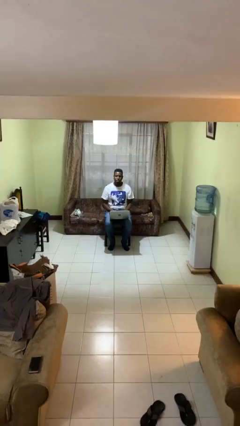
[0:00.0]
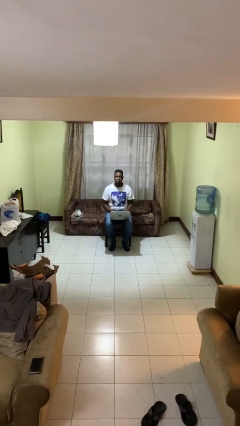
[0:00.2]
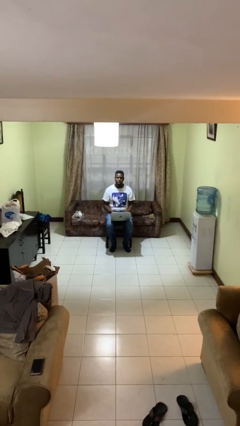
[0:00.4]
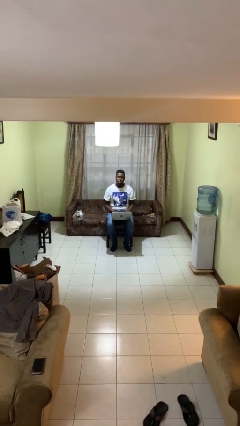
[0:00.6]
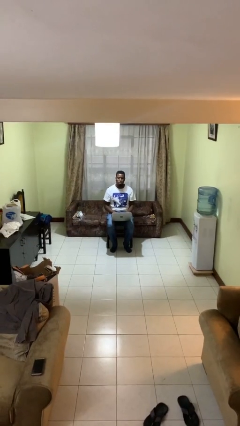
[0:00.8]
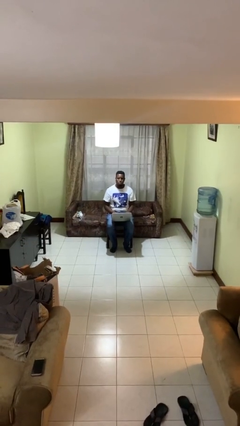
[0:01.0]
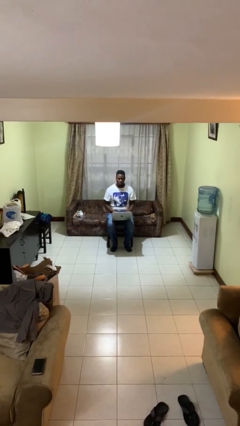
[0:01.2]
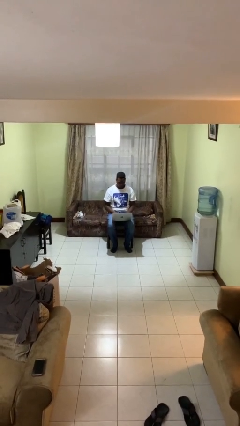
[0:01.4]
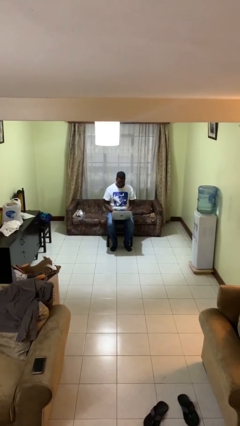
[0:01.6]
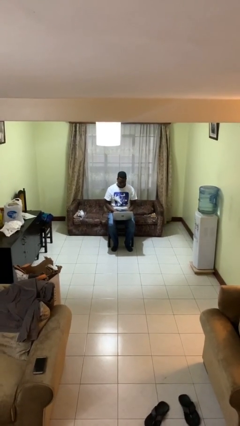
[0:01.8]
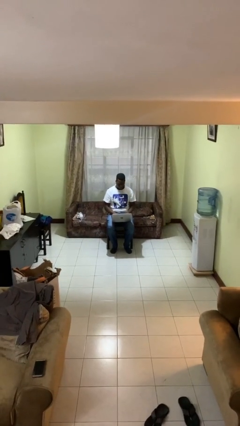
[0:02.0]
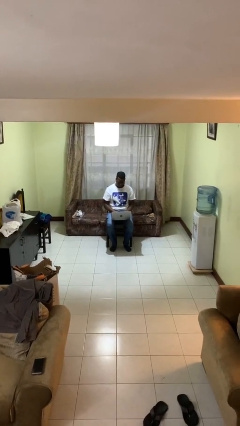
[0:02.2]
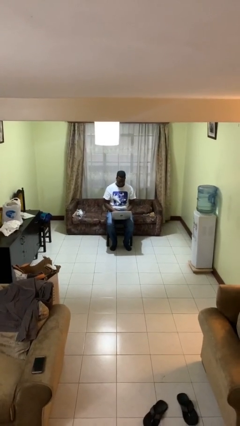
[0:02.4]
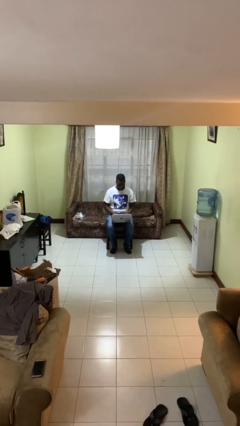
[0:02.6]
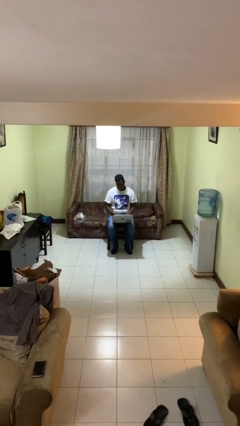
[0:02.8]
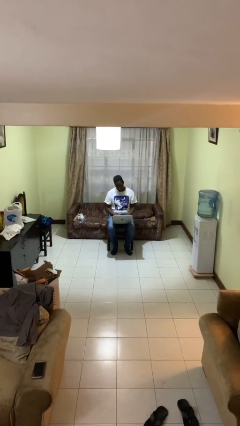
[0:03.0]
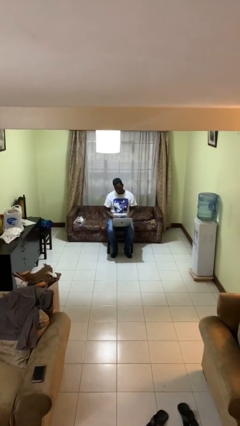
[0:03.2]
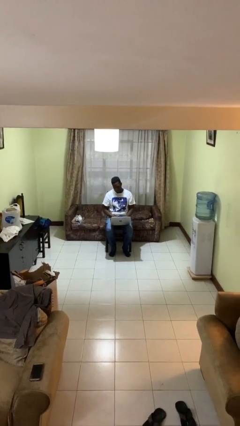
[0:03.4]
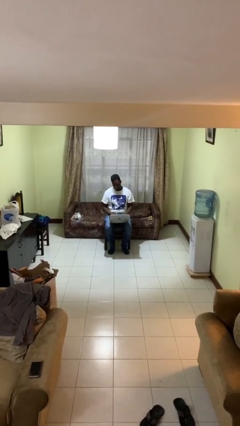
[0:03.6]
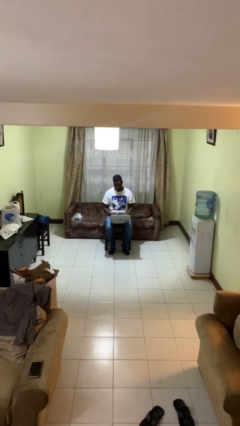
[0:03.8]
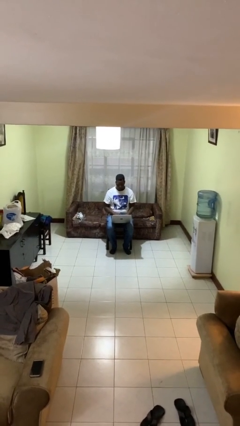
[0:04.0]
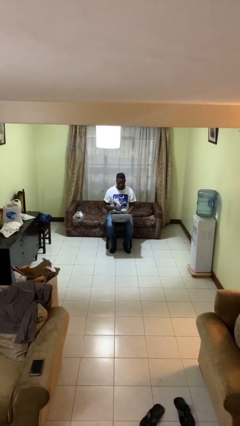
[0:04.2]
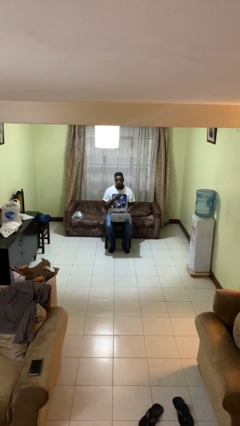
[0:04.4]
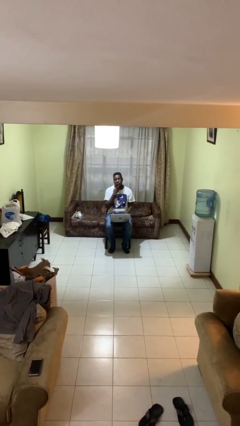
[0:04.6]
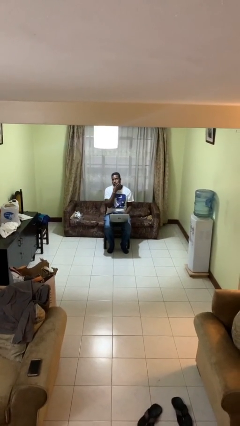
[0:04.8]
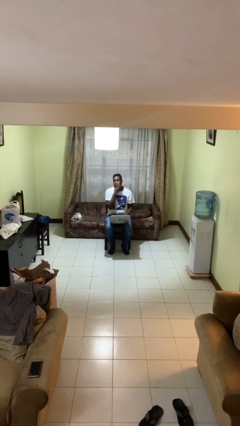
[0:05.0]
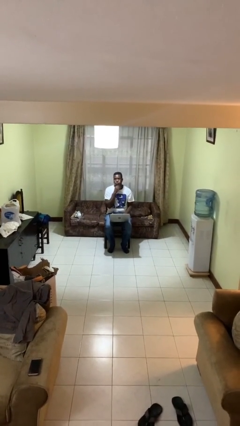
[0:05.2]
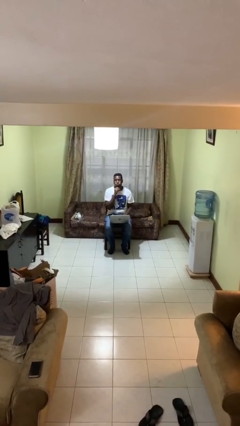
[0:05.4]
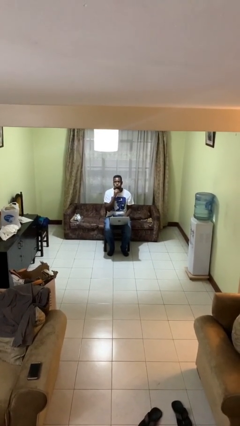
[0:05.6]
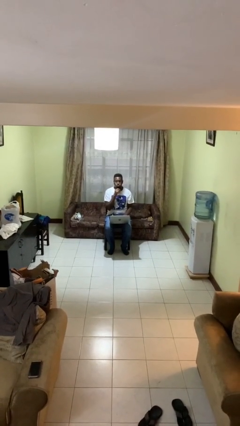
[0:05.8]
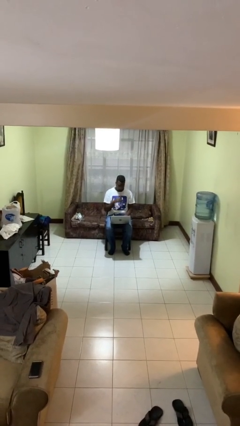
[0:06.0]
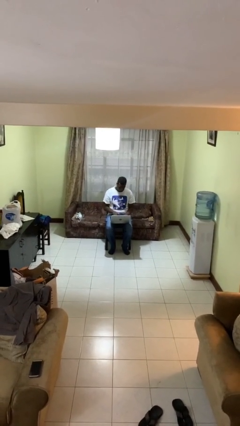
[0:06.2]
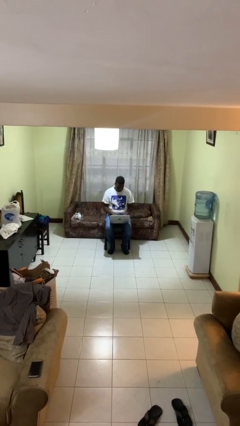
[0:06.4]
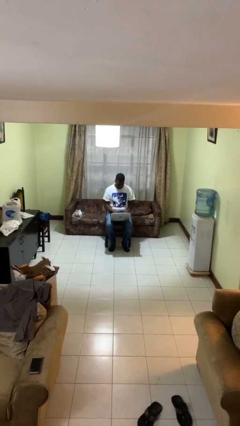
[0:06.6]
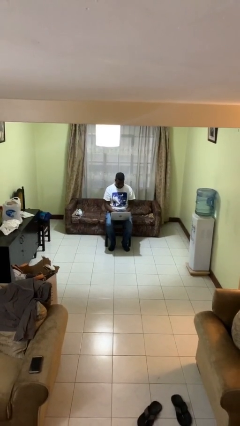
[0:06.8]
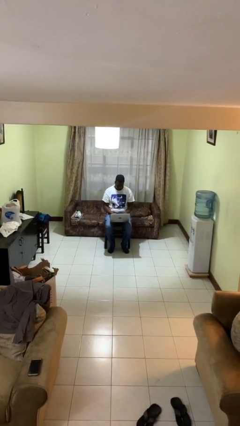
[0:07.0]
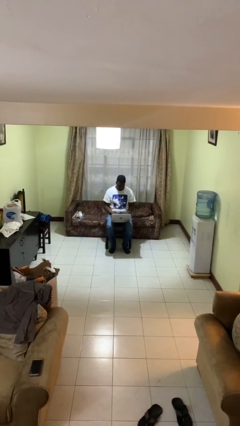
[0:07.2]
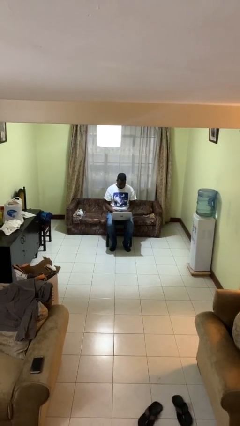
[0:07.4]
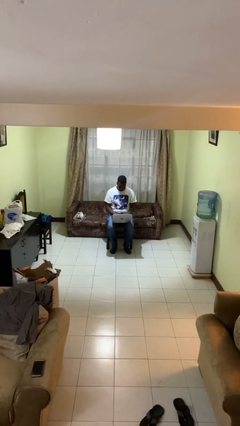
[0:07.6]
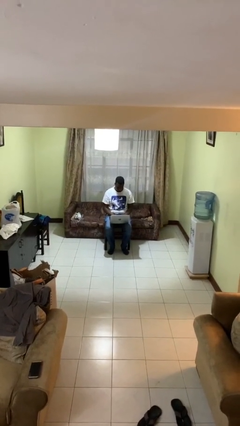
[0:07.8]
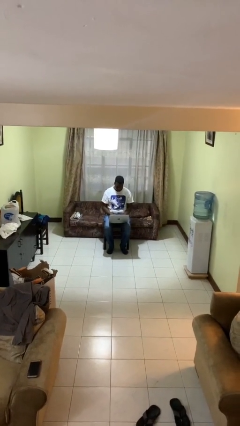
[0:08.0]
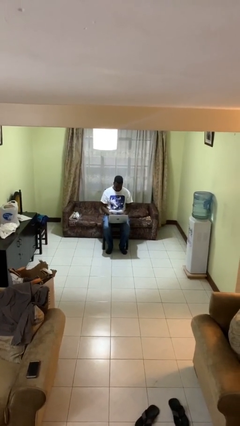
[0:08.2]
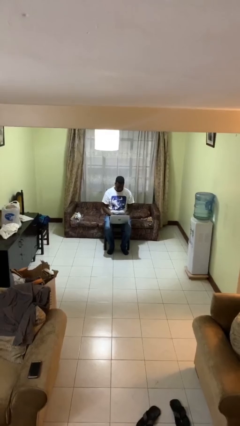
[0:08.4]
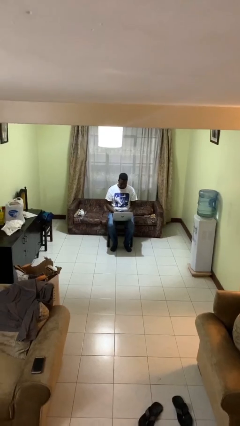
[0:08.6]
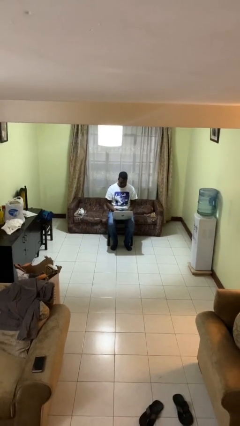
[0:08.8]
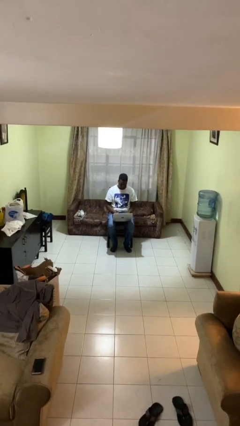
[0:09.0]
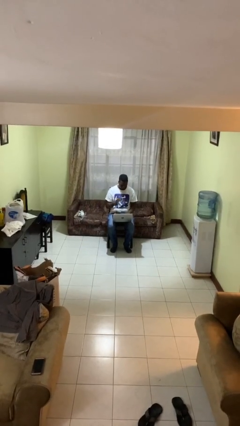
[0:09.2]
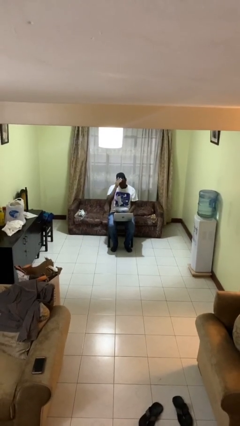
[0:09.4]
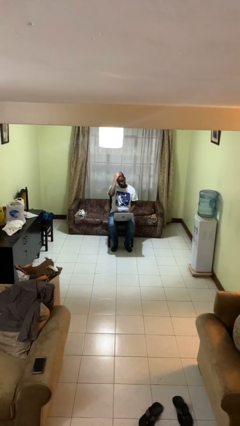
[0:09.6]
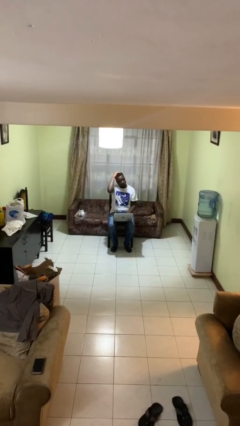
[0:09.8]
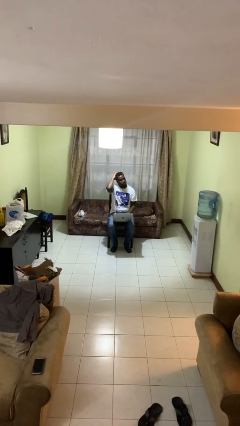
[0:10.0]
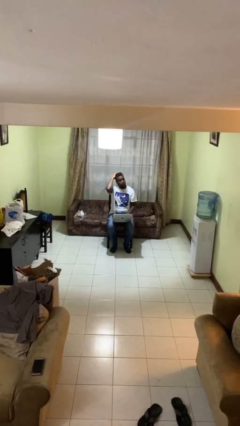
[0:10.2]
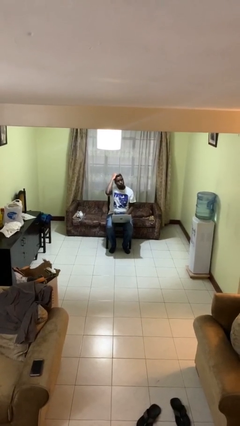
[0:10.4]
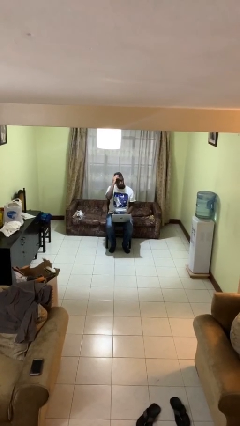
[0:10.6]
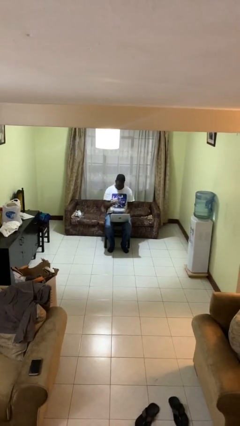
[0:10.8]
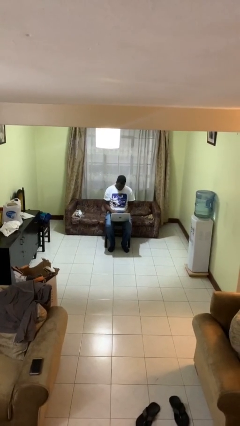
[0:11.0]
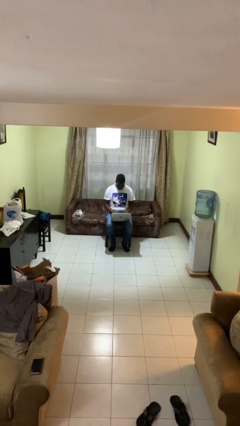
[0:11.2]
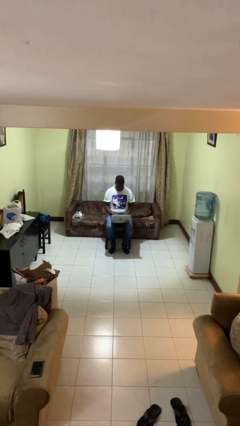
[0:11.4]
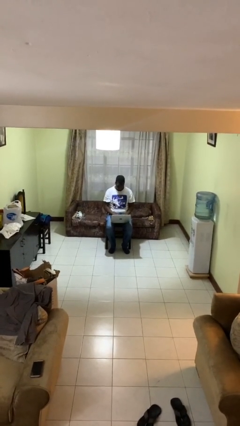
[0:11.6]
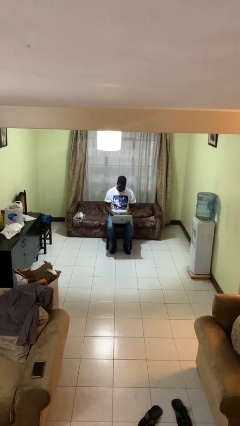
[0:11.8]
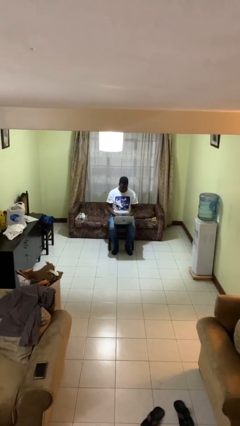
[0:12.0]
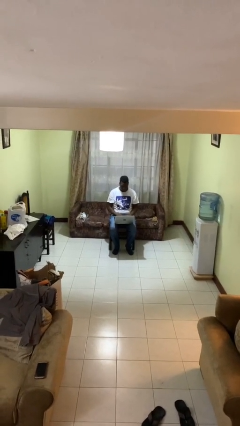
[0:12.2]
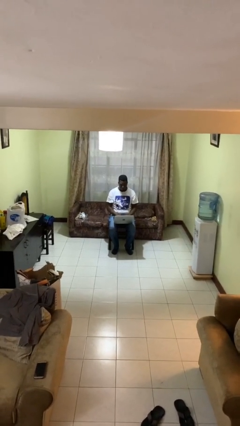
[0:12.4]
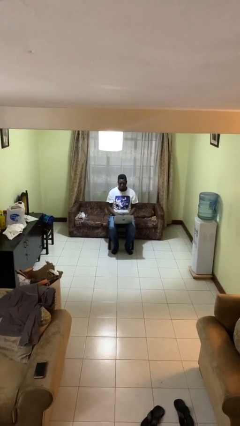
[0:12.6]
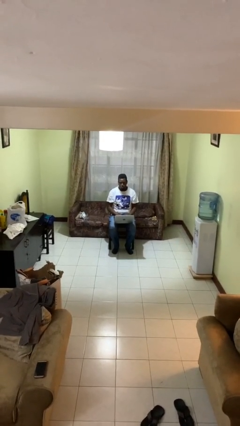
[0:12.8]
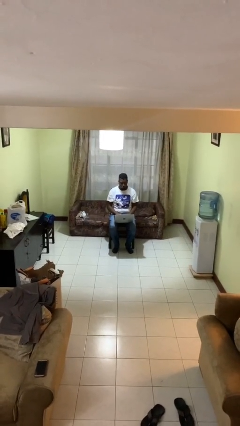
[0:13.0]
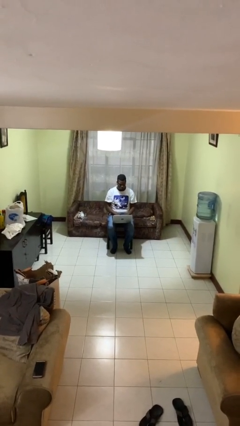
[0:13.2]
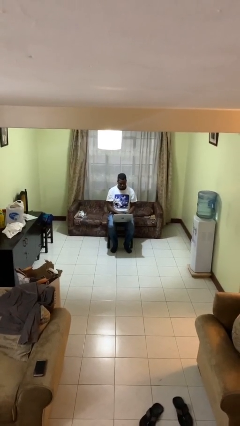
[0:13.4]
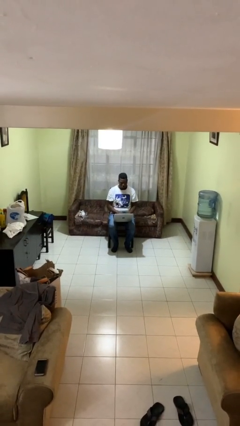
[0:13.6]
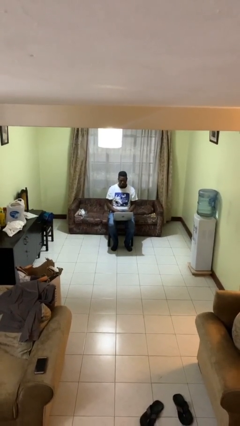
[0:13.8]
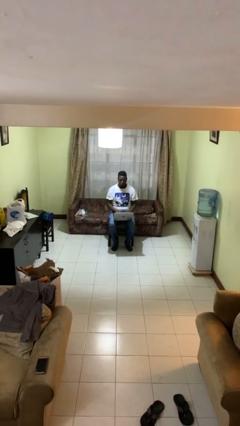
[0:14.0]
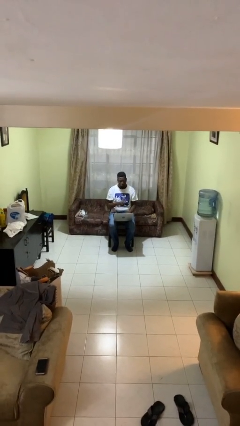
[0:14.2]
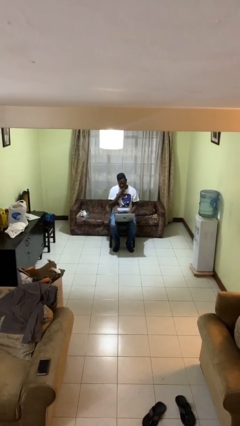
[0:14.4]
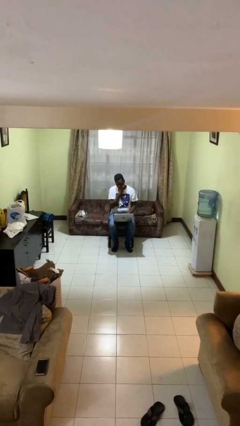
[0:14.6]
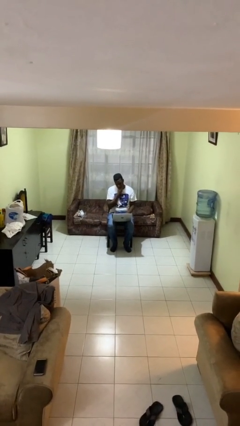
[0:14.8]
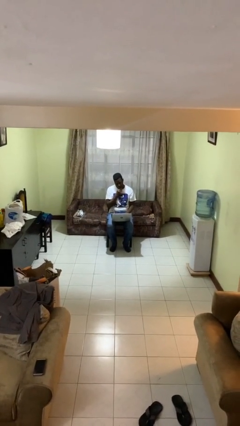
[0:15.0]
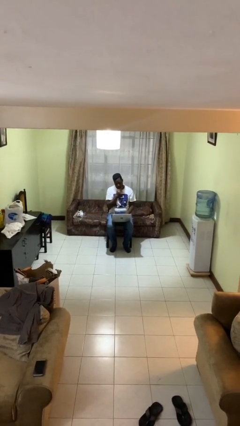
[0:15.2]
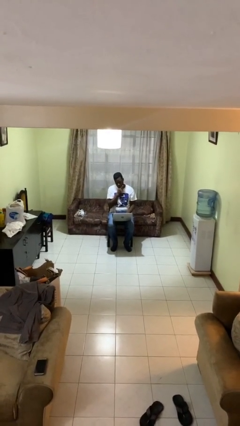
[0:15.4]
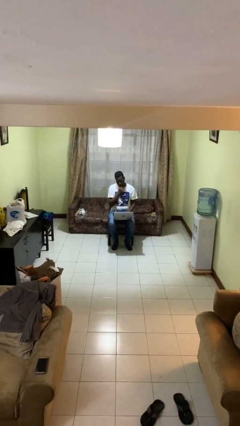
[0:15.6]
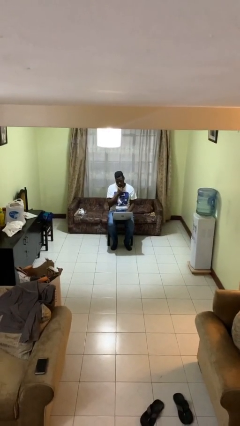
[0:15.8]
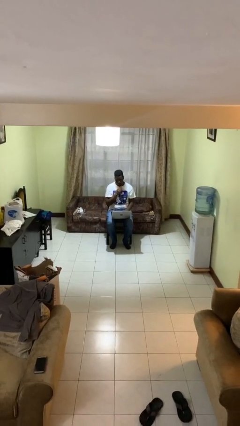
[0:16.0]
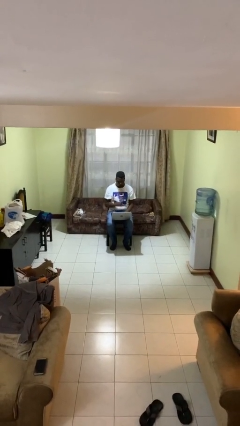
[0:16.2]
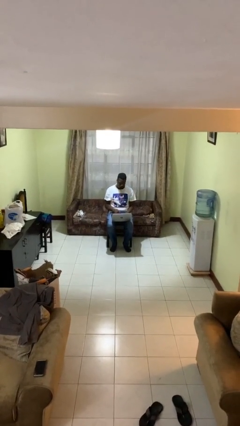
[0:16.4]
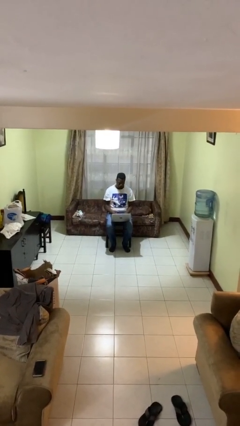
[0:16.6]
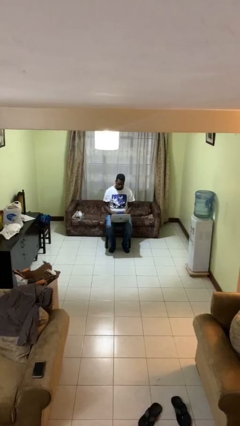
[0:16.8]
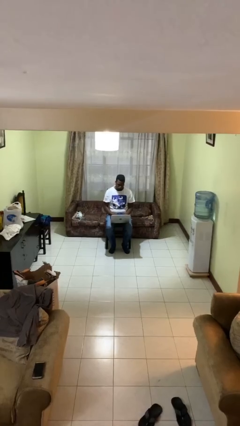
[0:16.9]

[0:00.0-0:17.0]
person interacts with laptop

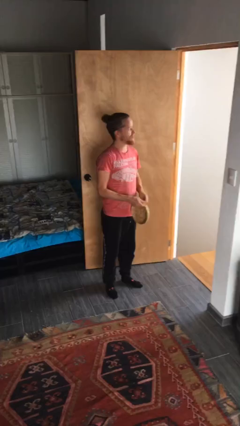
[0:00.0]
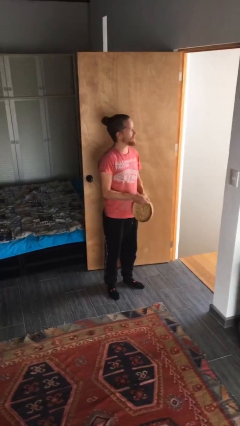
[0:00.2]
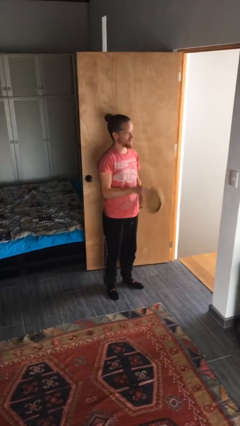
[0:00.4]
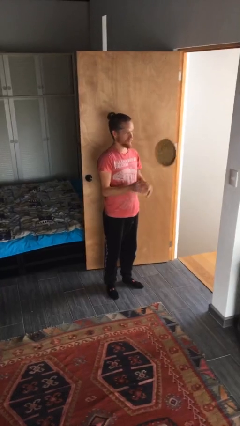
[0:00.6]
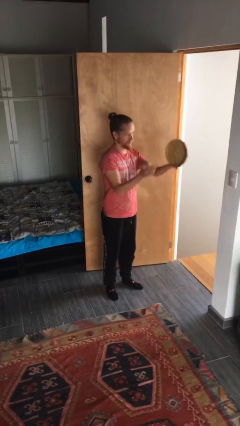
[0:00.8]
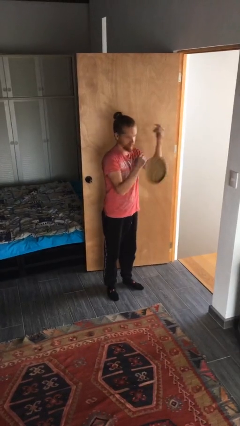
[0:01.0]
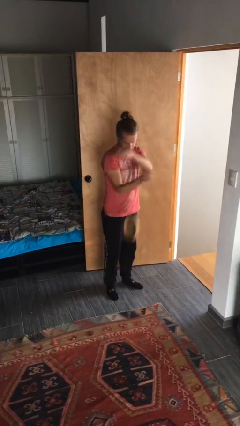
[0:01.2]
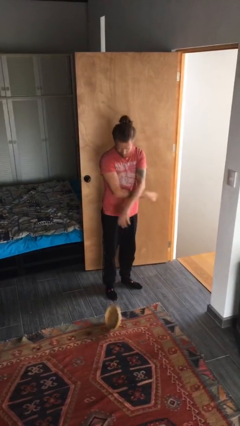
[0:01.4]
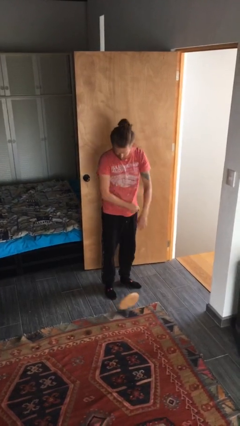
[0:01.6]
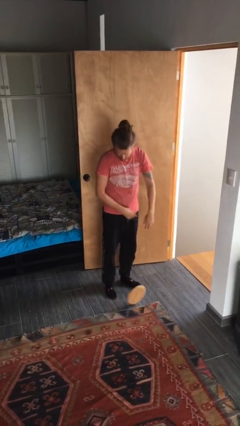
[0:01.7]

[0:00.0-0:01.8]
person drops object
